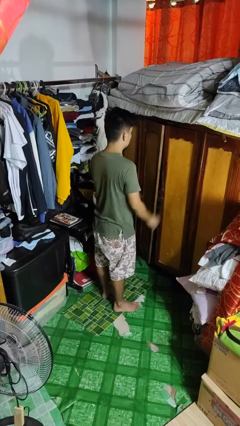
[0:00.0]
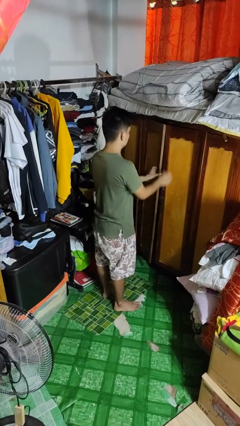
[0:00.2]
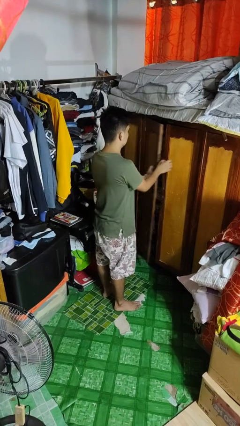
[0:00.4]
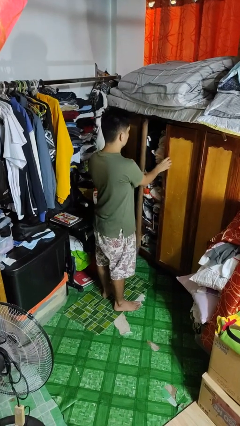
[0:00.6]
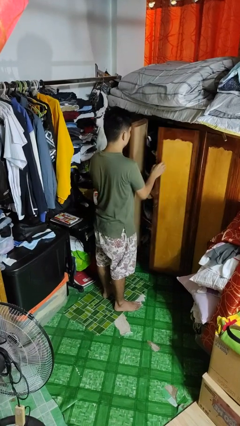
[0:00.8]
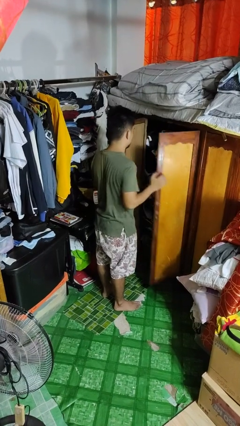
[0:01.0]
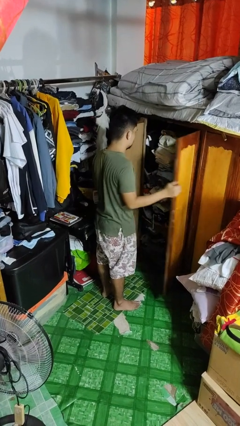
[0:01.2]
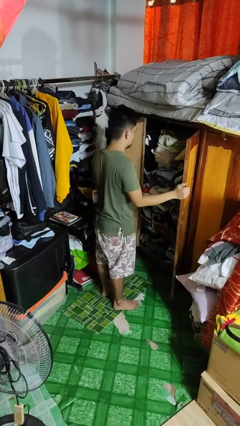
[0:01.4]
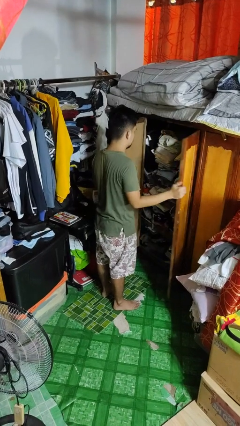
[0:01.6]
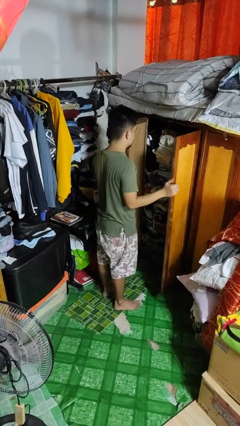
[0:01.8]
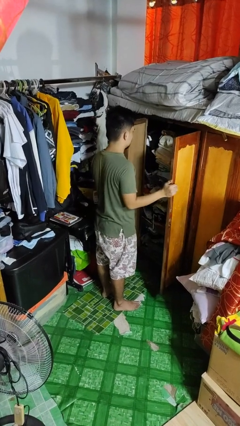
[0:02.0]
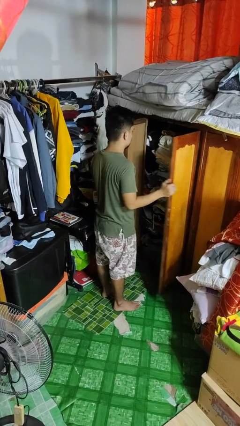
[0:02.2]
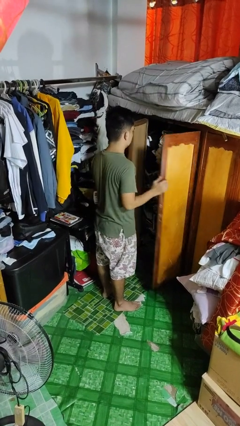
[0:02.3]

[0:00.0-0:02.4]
person opens closet door

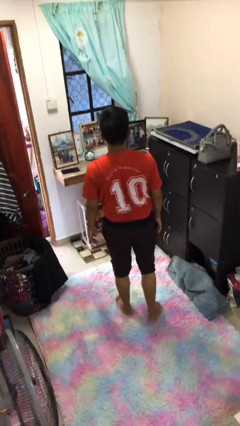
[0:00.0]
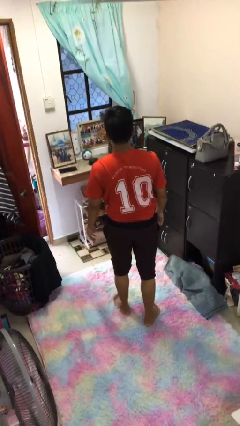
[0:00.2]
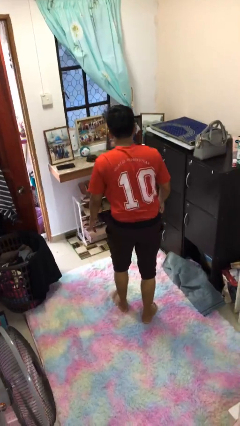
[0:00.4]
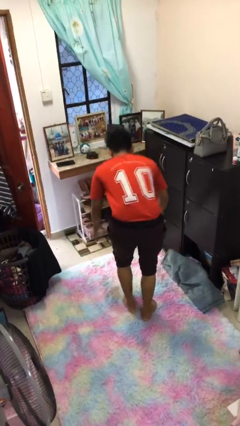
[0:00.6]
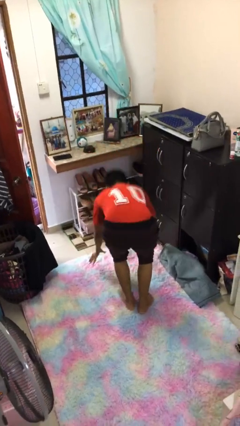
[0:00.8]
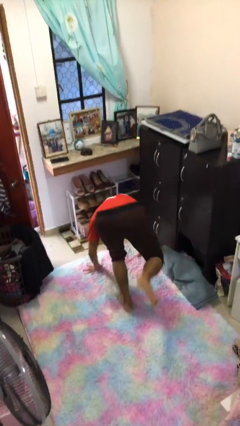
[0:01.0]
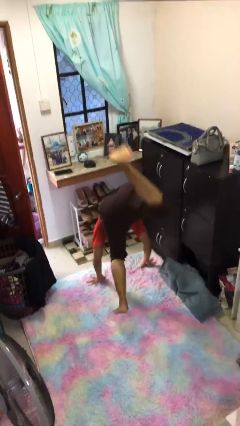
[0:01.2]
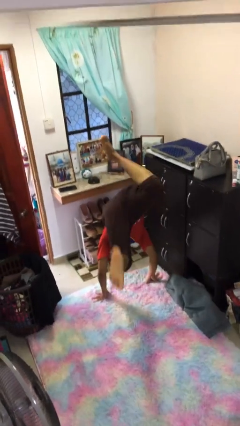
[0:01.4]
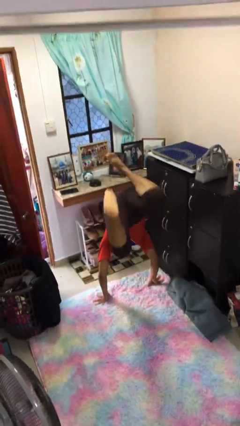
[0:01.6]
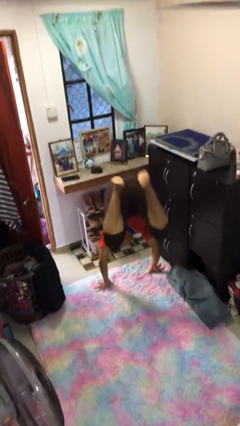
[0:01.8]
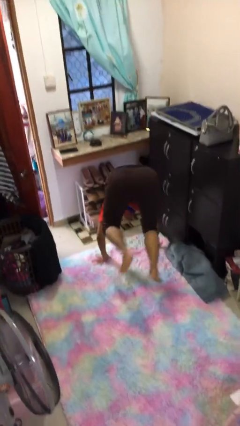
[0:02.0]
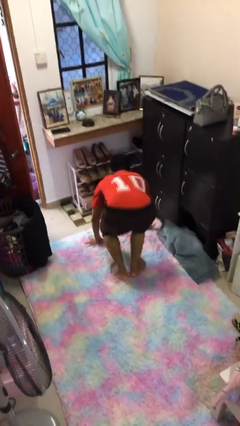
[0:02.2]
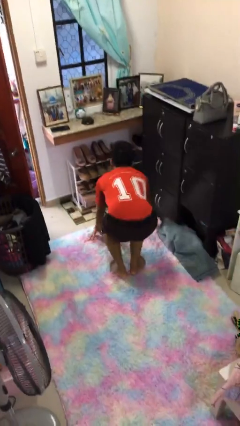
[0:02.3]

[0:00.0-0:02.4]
person handstand

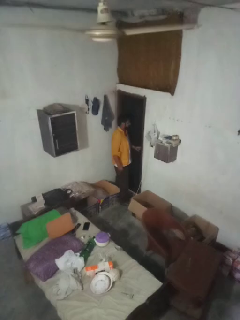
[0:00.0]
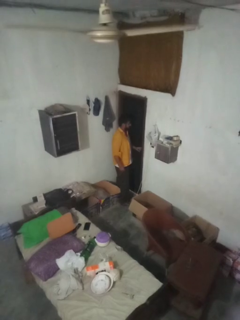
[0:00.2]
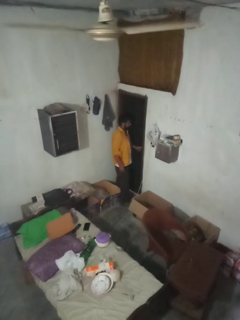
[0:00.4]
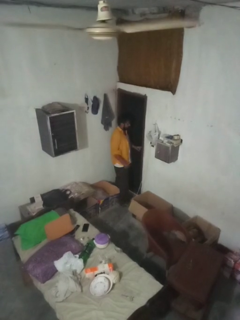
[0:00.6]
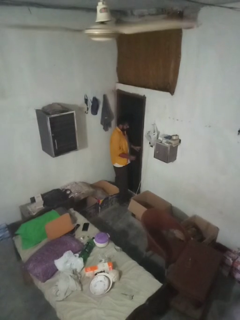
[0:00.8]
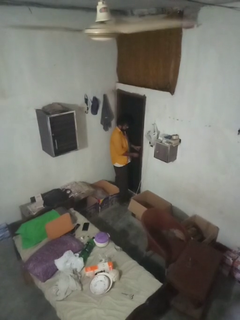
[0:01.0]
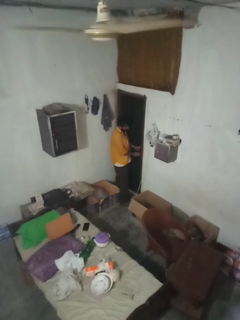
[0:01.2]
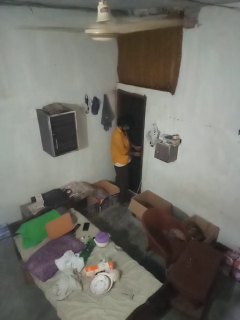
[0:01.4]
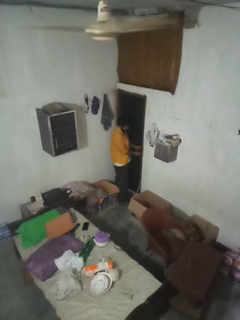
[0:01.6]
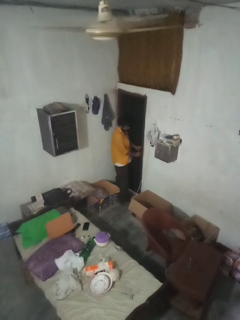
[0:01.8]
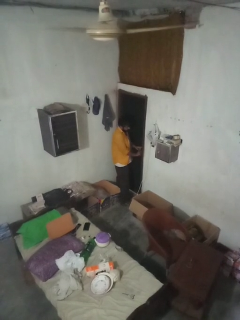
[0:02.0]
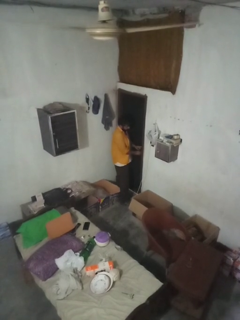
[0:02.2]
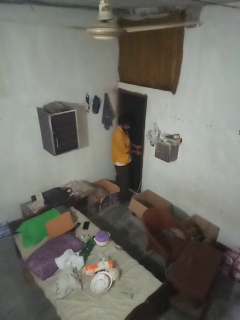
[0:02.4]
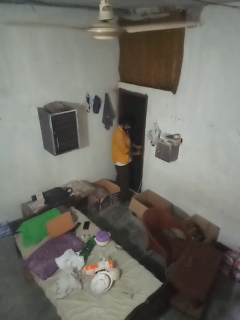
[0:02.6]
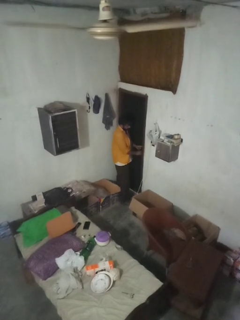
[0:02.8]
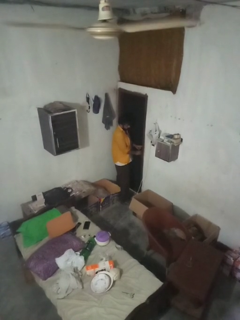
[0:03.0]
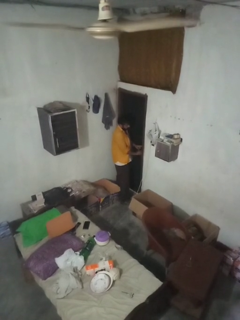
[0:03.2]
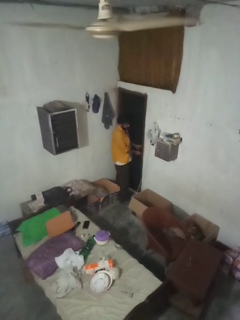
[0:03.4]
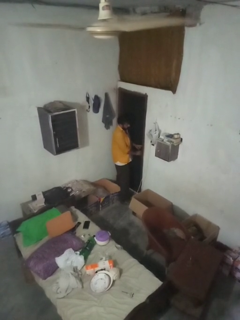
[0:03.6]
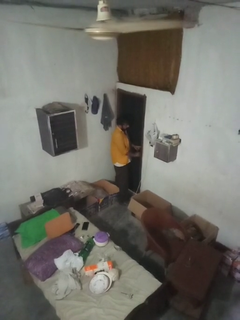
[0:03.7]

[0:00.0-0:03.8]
person locks door with keys

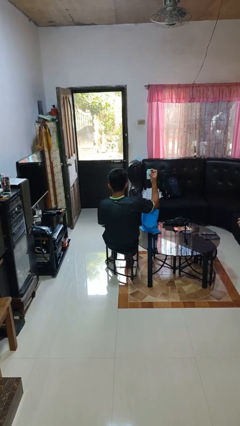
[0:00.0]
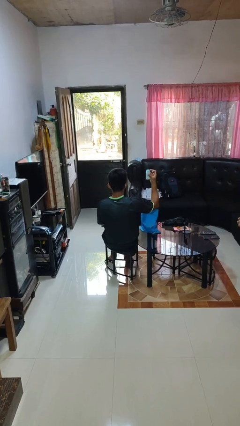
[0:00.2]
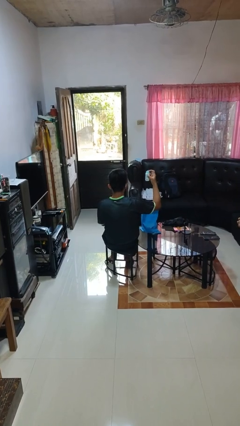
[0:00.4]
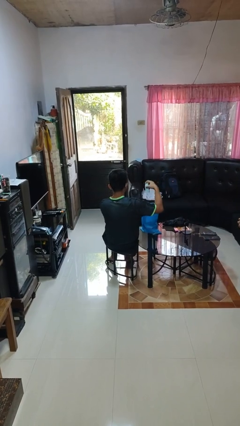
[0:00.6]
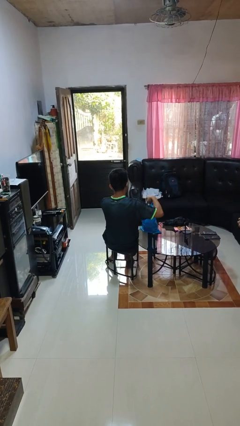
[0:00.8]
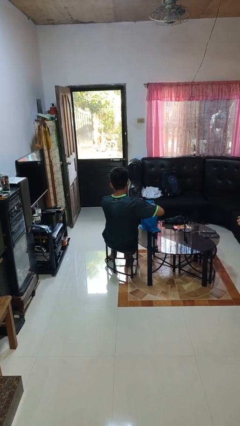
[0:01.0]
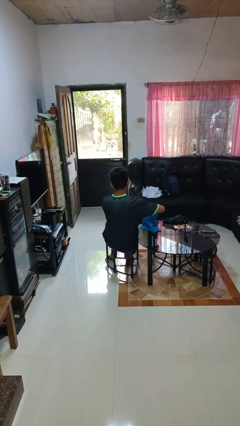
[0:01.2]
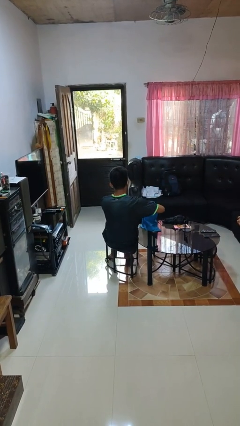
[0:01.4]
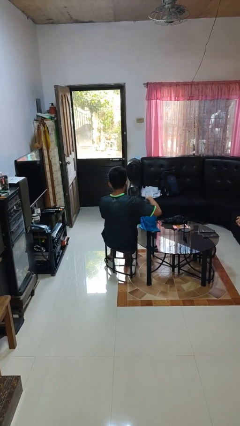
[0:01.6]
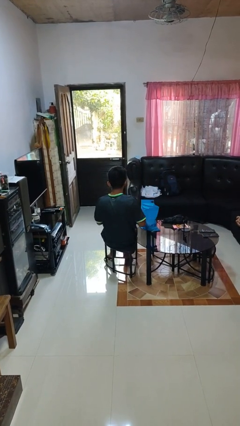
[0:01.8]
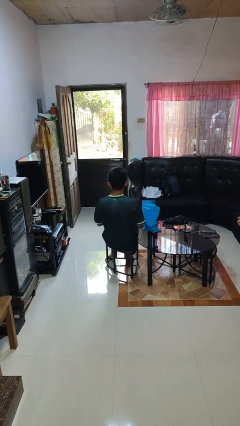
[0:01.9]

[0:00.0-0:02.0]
person puts object into bag

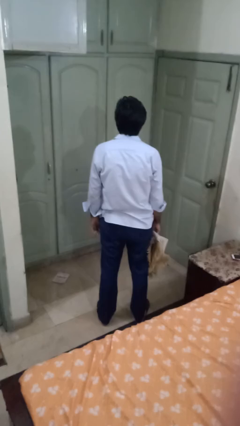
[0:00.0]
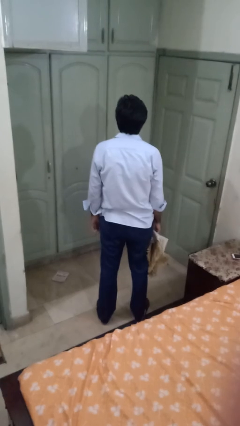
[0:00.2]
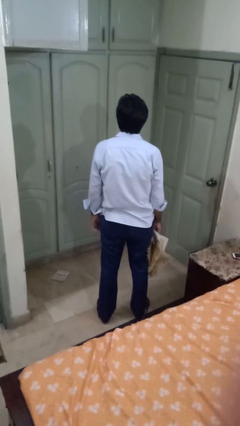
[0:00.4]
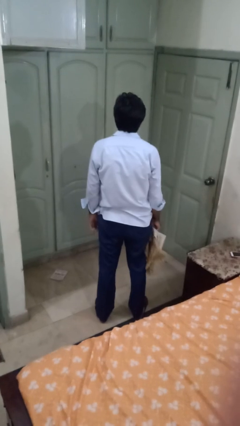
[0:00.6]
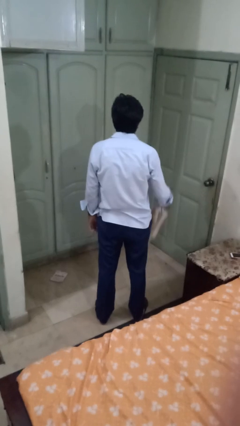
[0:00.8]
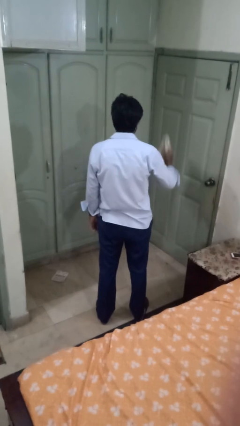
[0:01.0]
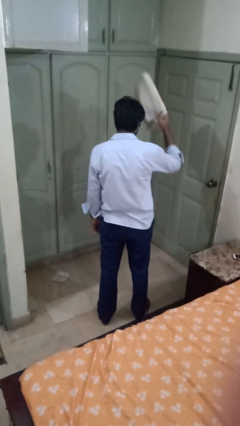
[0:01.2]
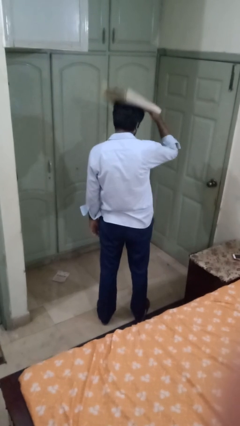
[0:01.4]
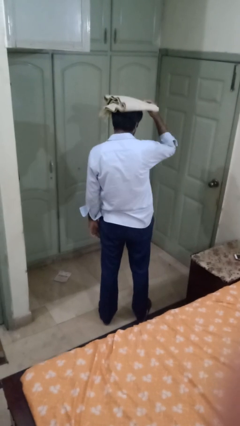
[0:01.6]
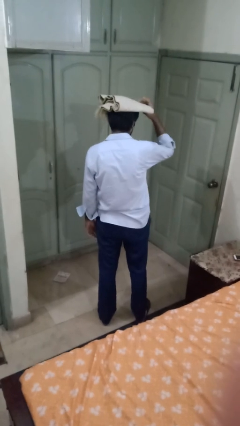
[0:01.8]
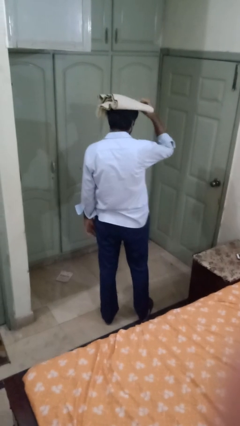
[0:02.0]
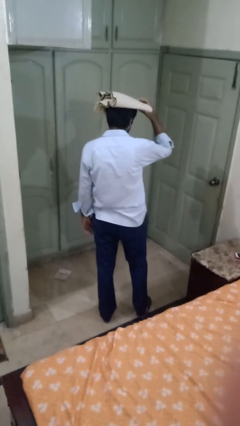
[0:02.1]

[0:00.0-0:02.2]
person holds object above head

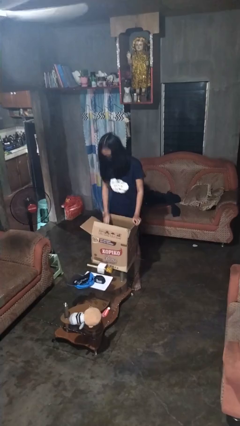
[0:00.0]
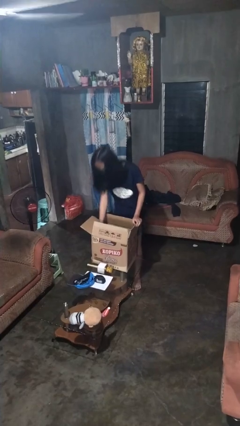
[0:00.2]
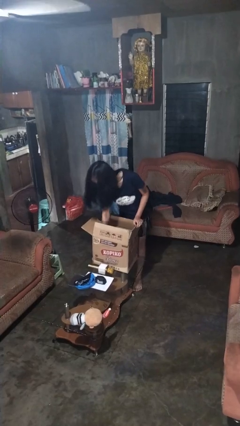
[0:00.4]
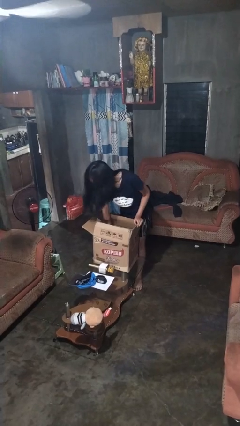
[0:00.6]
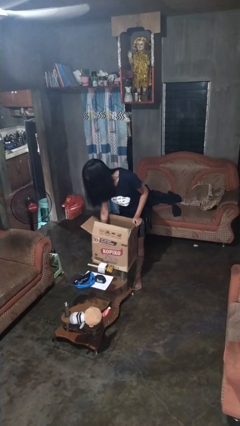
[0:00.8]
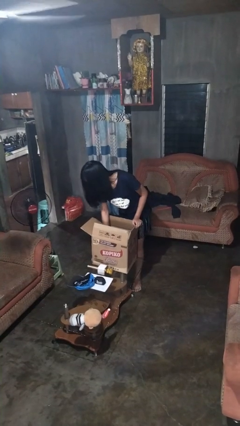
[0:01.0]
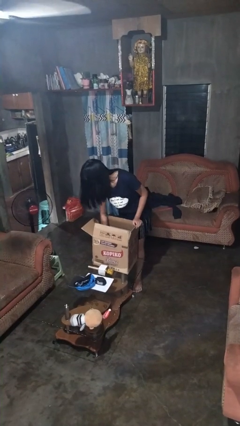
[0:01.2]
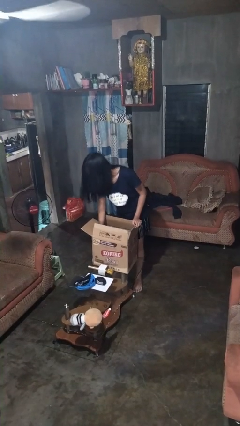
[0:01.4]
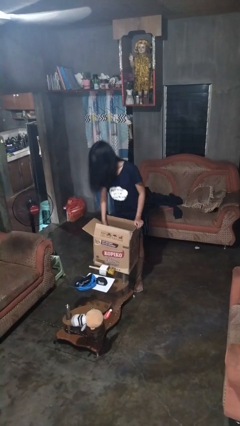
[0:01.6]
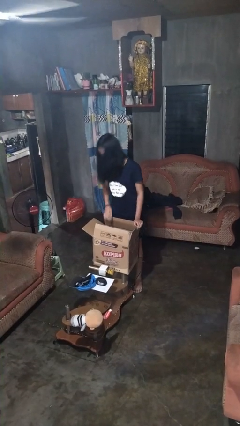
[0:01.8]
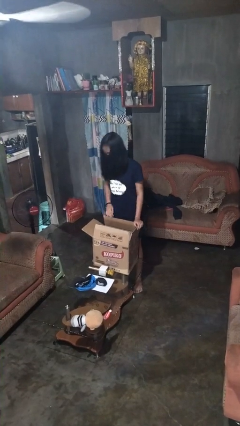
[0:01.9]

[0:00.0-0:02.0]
person searches in box

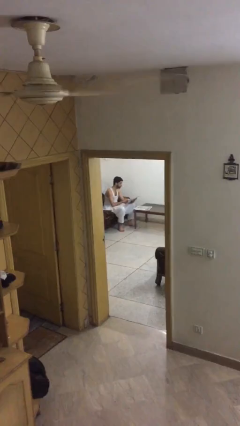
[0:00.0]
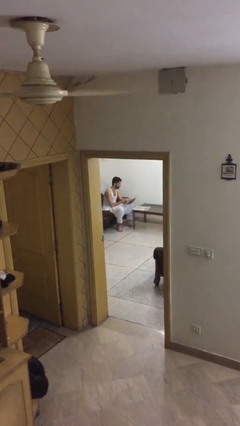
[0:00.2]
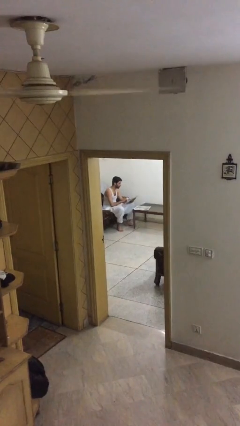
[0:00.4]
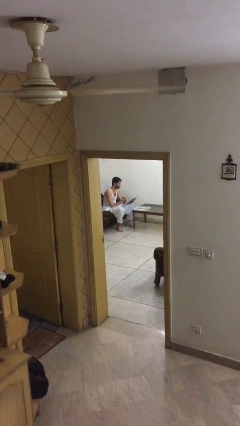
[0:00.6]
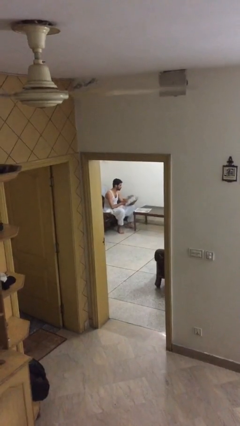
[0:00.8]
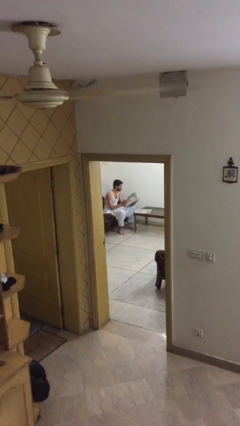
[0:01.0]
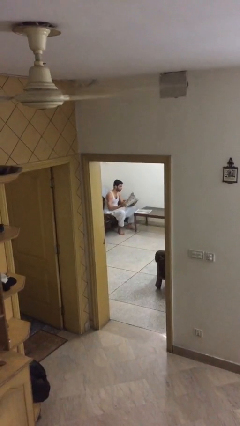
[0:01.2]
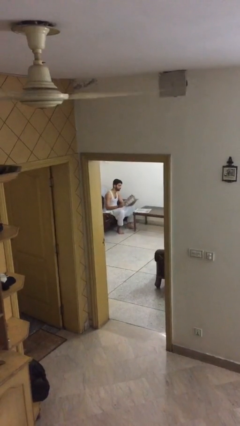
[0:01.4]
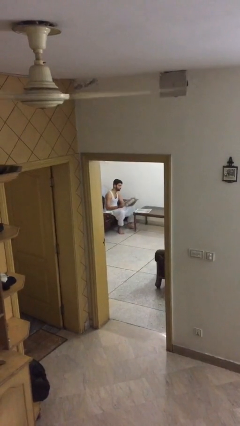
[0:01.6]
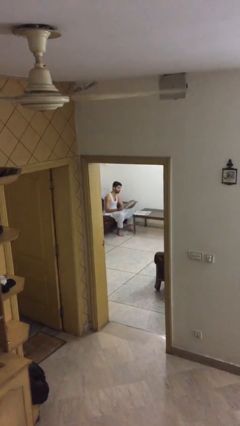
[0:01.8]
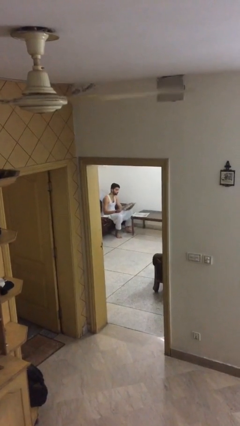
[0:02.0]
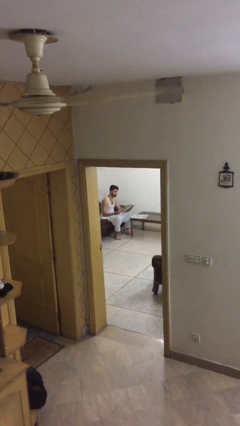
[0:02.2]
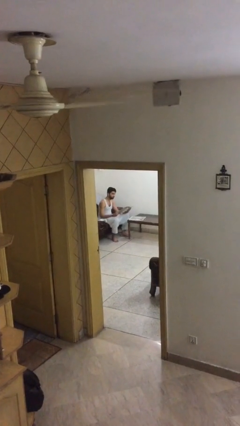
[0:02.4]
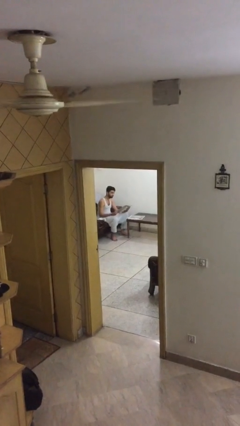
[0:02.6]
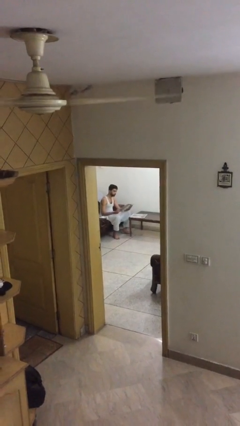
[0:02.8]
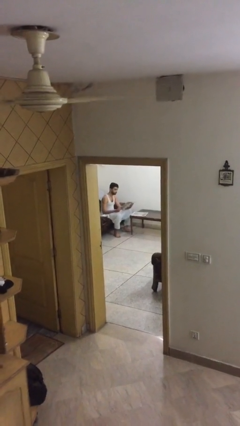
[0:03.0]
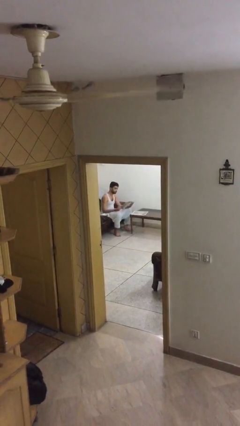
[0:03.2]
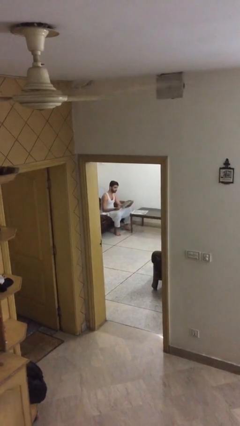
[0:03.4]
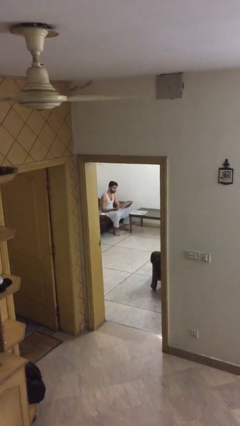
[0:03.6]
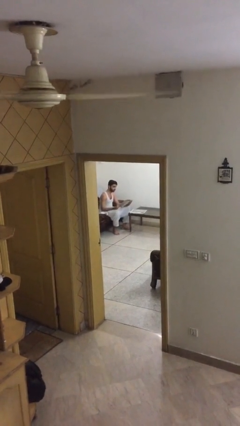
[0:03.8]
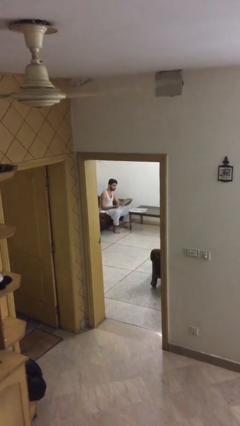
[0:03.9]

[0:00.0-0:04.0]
person reads document
